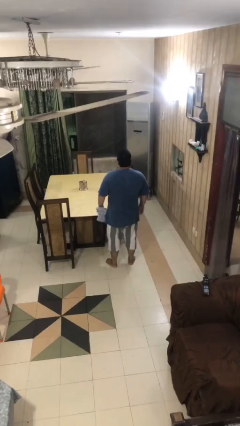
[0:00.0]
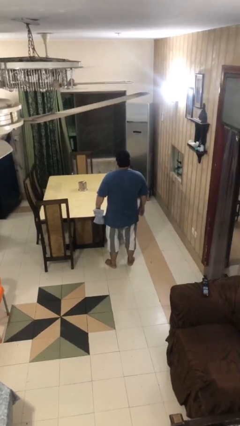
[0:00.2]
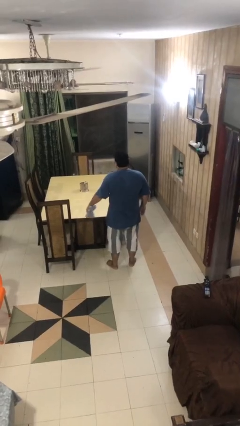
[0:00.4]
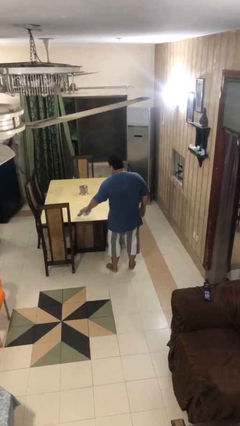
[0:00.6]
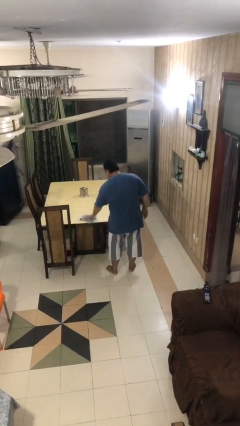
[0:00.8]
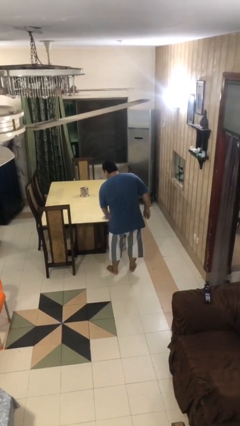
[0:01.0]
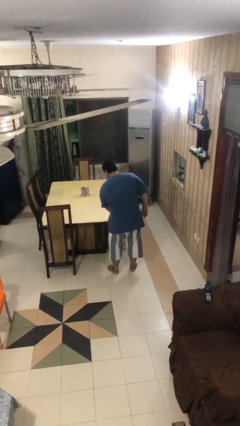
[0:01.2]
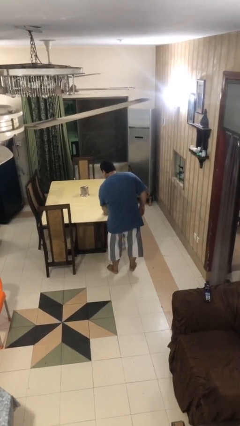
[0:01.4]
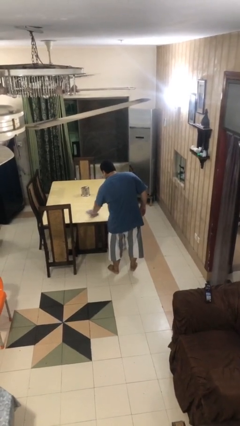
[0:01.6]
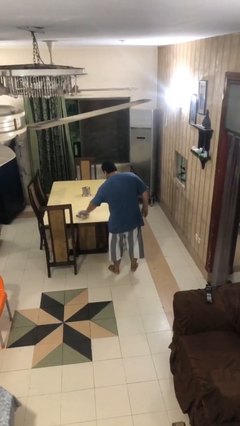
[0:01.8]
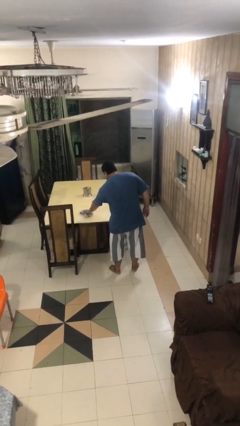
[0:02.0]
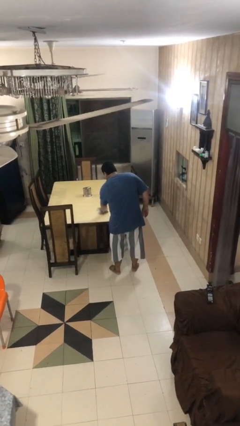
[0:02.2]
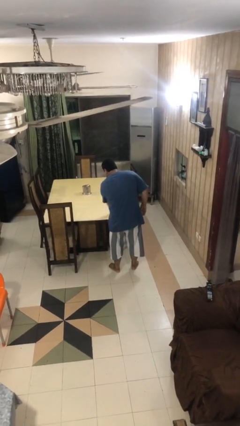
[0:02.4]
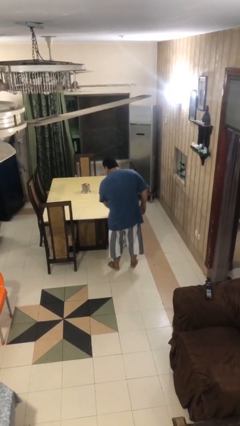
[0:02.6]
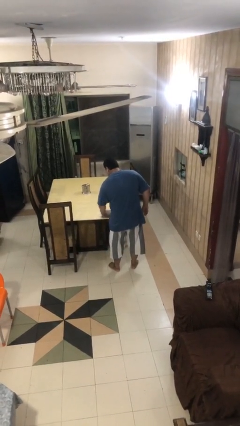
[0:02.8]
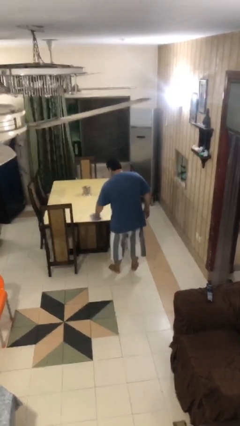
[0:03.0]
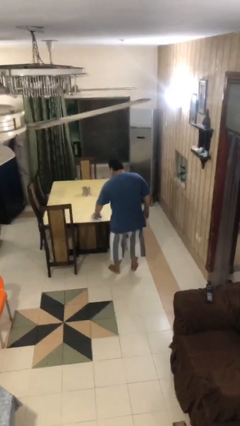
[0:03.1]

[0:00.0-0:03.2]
person cleans table with rag

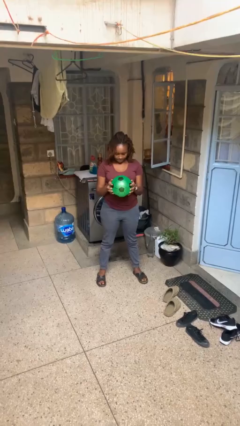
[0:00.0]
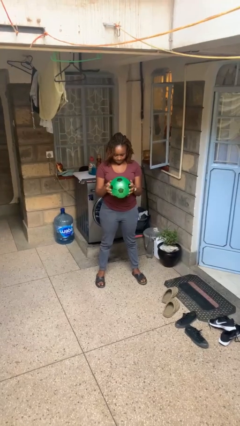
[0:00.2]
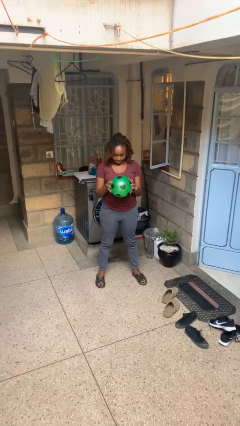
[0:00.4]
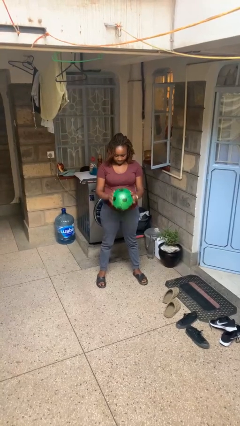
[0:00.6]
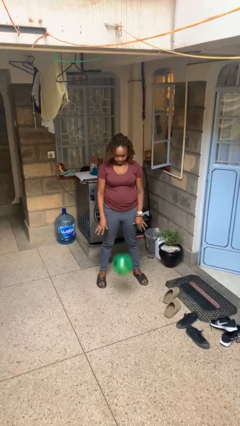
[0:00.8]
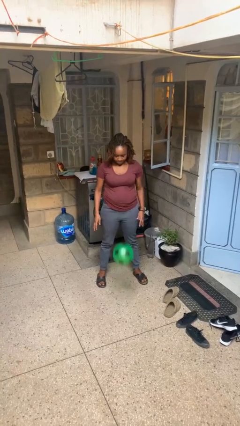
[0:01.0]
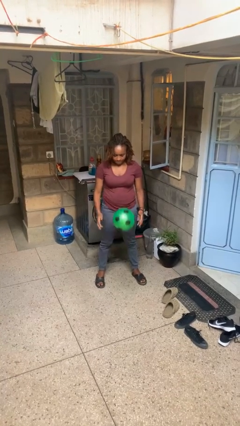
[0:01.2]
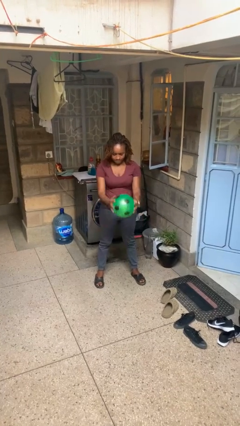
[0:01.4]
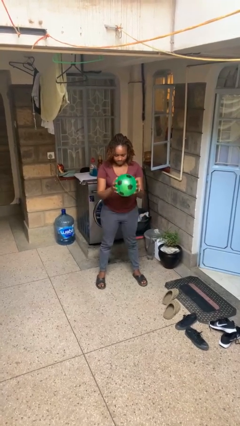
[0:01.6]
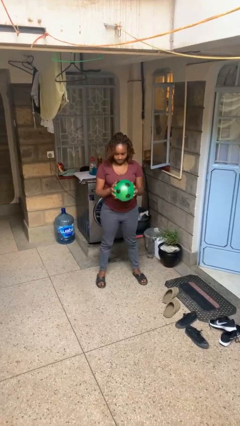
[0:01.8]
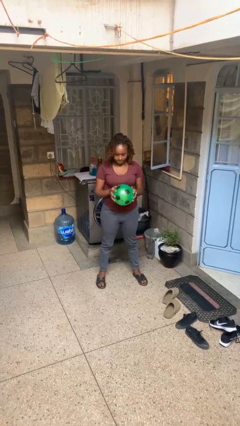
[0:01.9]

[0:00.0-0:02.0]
person bounces ball on floor

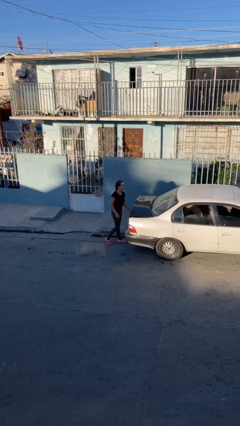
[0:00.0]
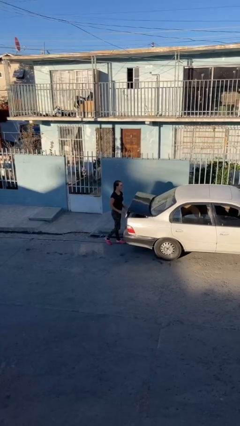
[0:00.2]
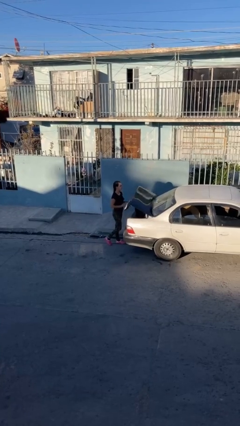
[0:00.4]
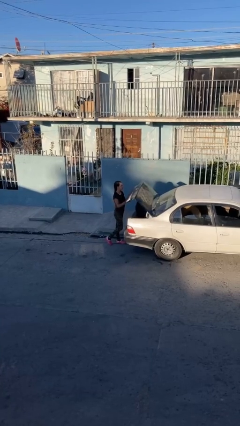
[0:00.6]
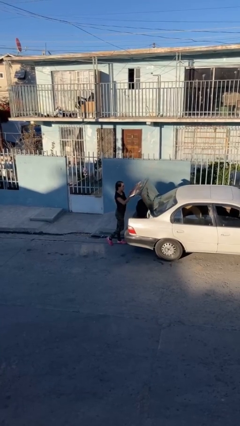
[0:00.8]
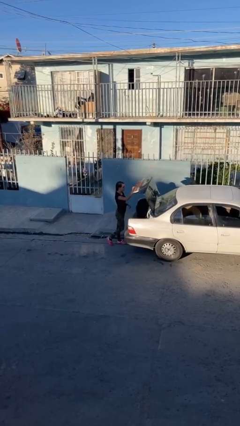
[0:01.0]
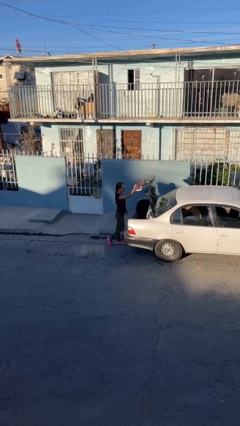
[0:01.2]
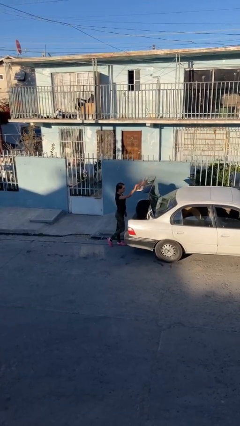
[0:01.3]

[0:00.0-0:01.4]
person opens car trunk

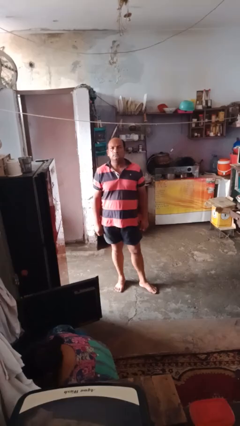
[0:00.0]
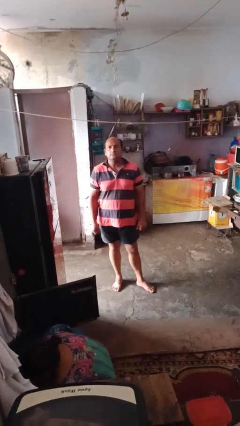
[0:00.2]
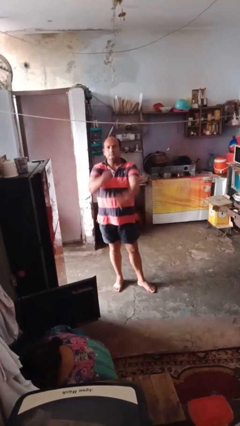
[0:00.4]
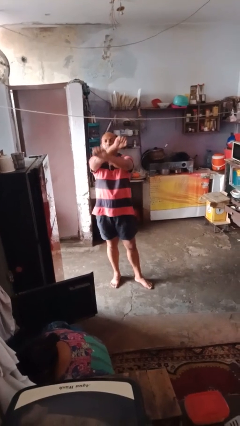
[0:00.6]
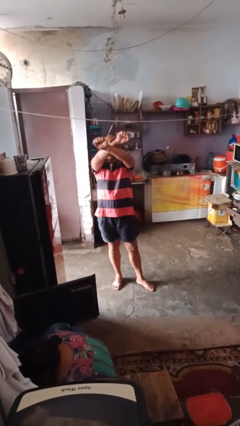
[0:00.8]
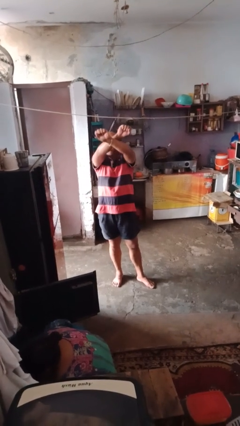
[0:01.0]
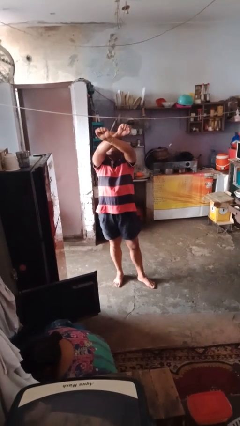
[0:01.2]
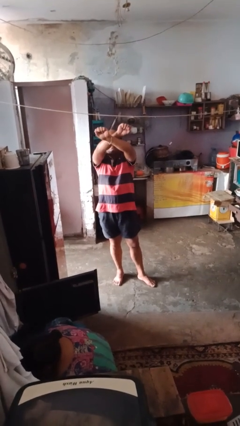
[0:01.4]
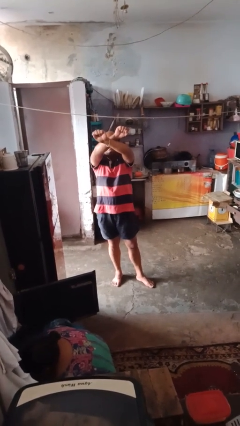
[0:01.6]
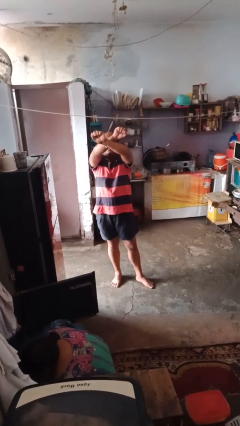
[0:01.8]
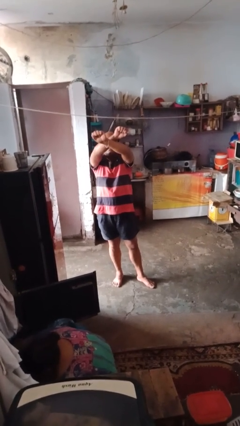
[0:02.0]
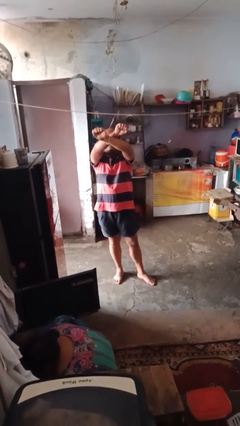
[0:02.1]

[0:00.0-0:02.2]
person gestures arms x

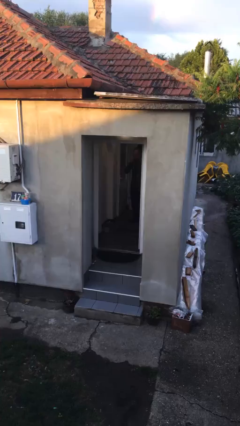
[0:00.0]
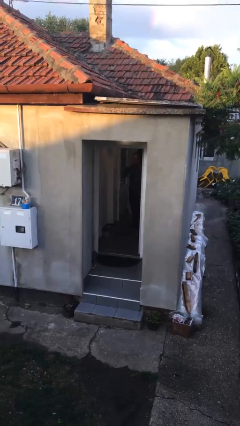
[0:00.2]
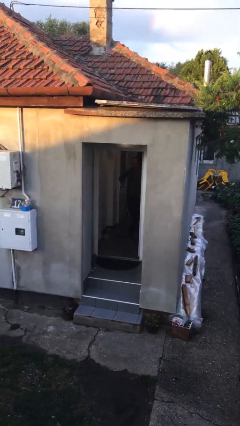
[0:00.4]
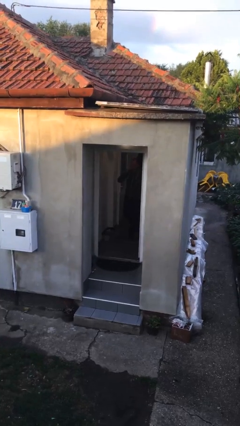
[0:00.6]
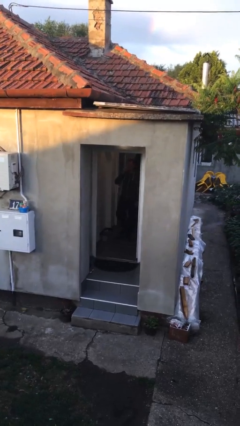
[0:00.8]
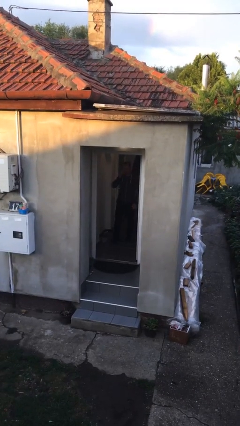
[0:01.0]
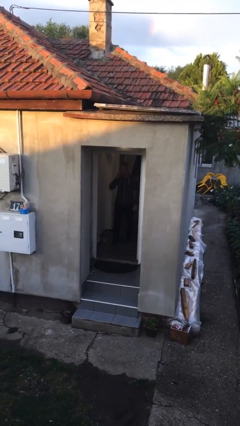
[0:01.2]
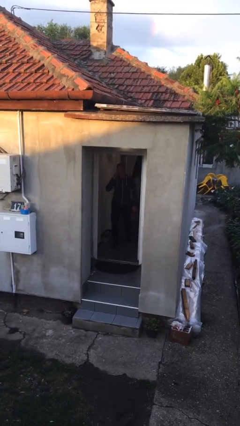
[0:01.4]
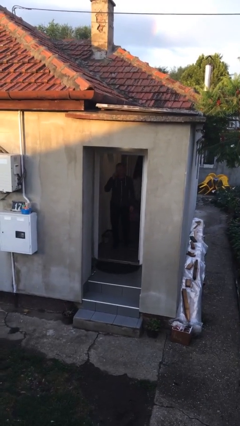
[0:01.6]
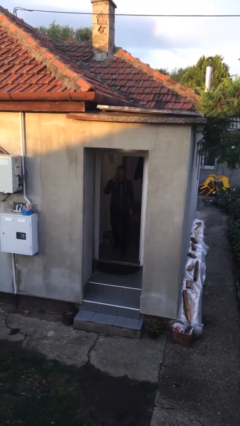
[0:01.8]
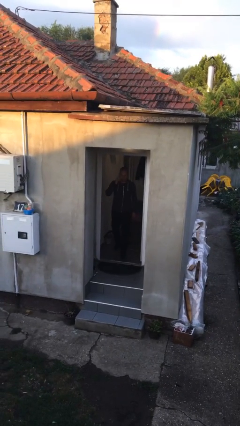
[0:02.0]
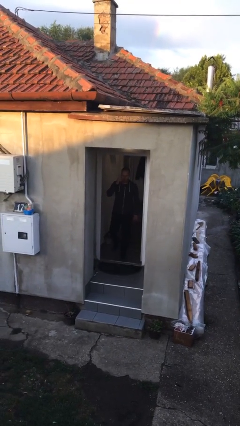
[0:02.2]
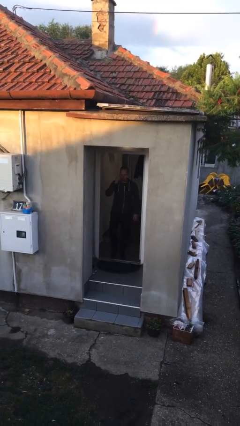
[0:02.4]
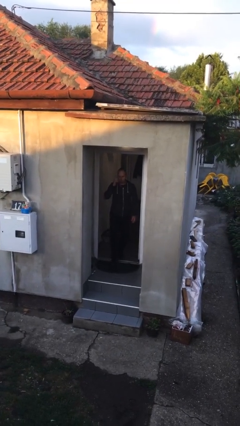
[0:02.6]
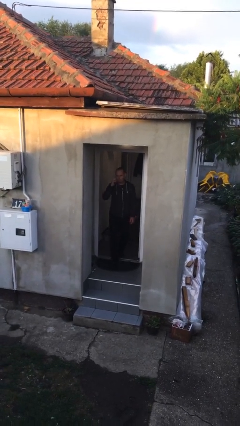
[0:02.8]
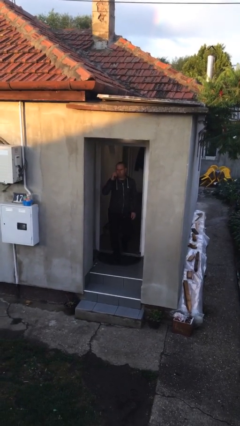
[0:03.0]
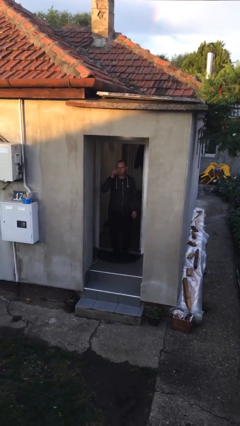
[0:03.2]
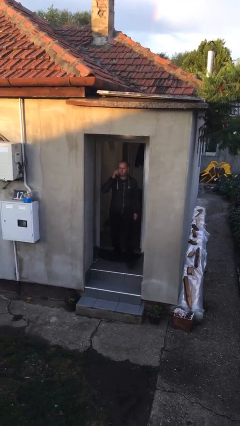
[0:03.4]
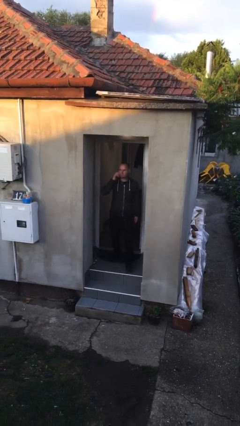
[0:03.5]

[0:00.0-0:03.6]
person enters scene through structure

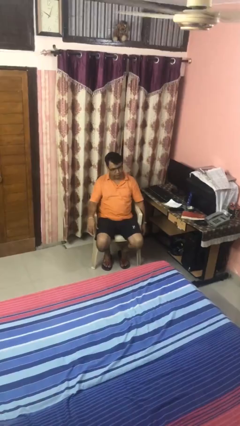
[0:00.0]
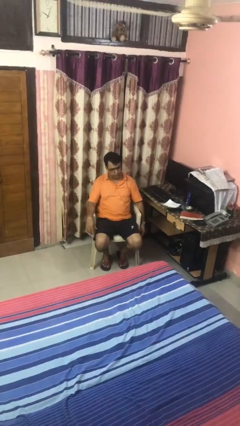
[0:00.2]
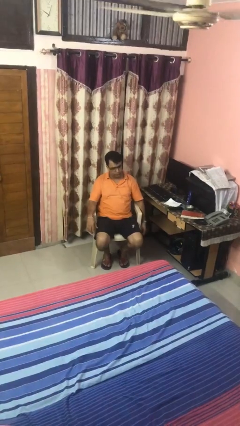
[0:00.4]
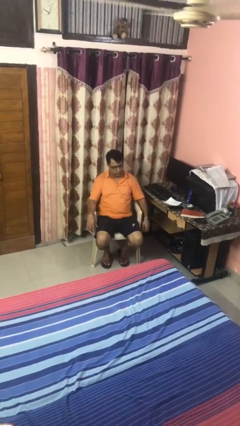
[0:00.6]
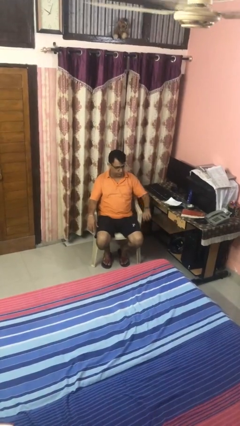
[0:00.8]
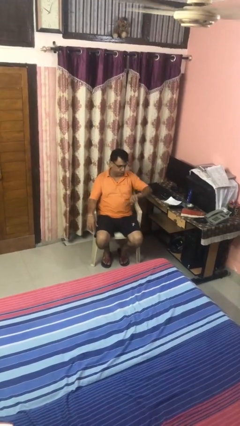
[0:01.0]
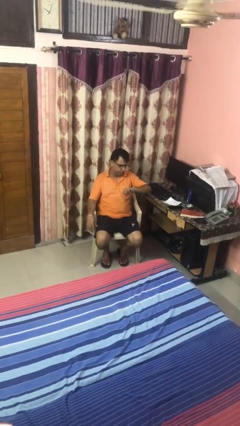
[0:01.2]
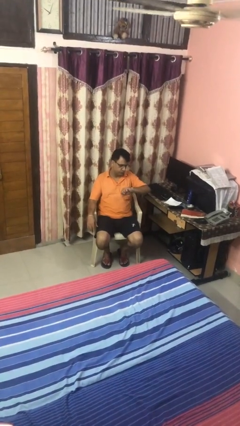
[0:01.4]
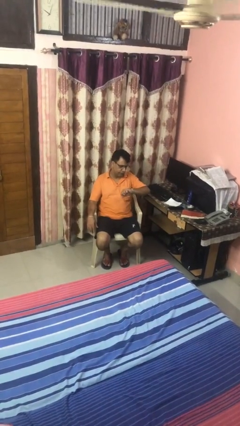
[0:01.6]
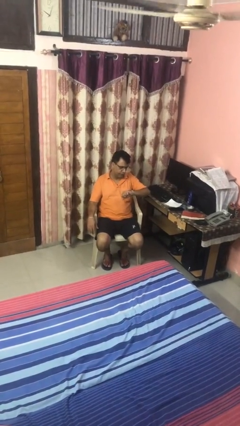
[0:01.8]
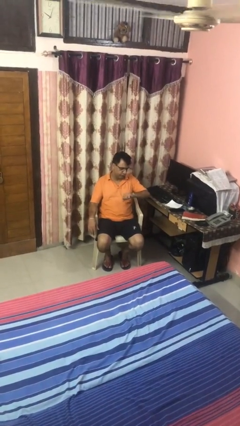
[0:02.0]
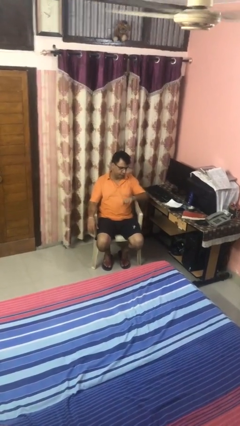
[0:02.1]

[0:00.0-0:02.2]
person looks at wristwatch

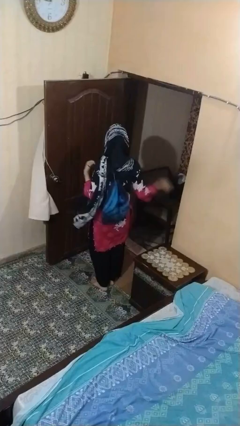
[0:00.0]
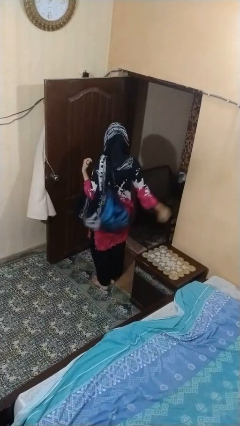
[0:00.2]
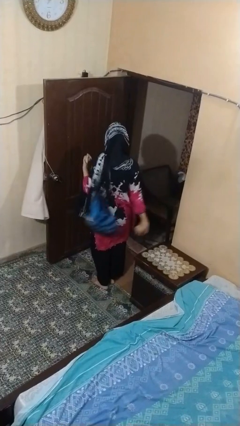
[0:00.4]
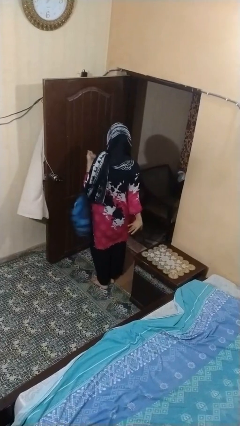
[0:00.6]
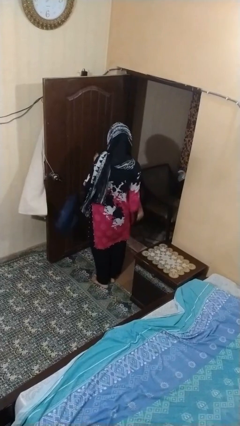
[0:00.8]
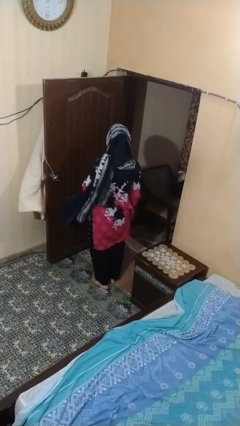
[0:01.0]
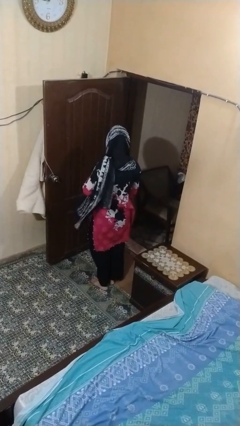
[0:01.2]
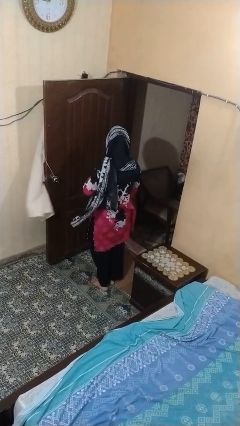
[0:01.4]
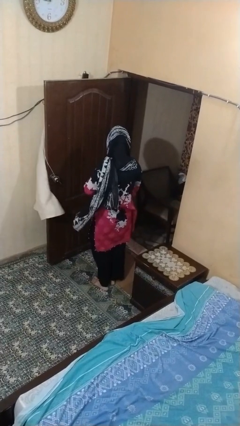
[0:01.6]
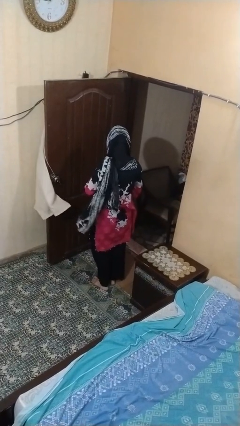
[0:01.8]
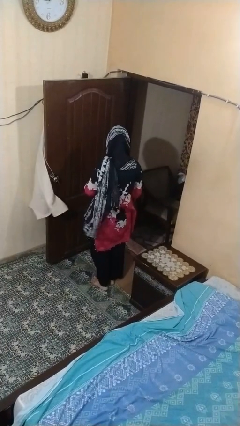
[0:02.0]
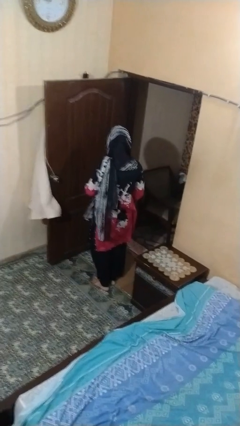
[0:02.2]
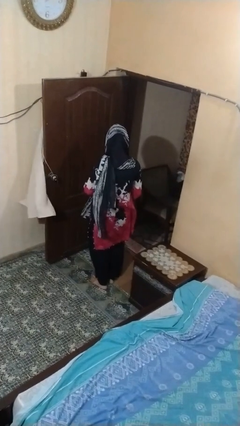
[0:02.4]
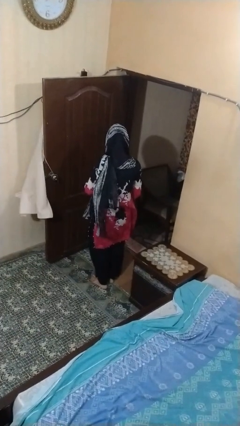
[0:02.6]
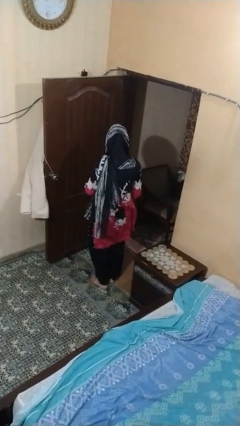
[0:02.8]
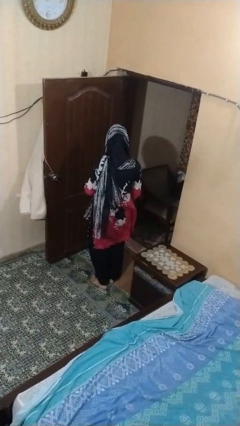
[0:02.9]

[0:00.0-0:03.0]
person takes off backpack
